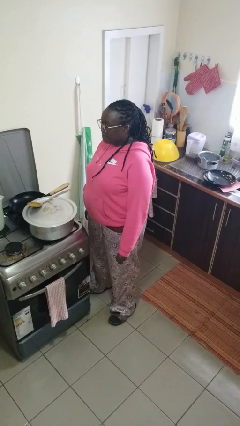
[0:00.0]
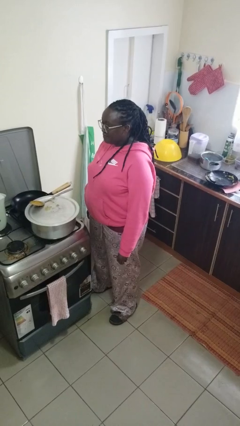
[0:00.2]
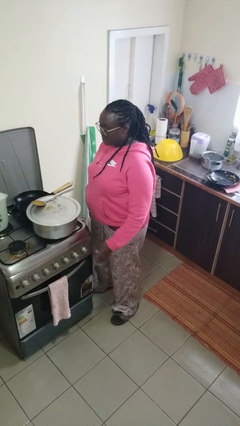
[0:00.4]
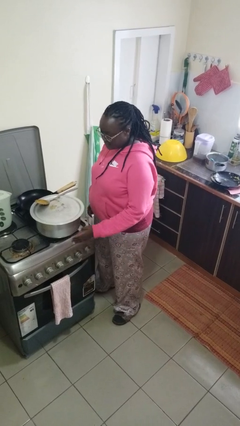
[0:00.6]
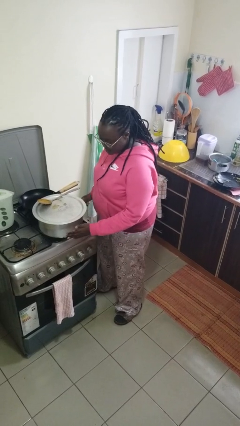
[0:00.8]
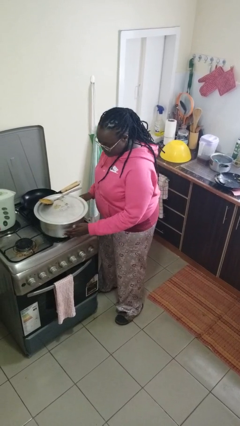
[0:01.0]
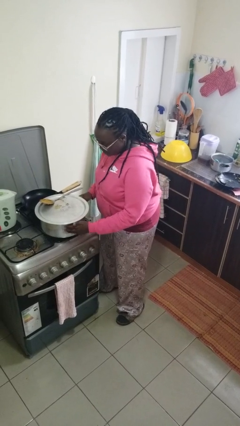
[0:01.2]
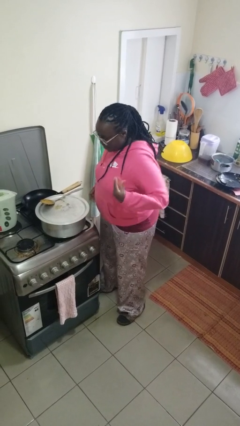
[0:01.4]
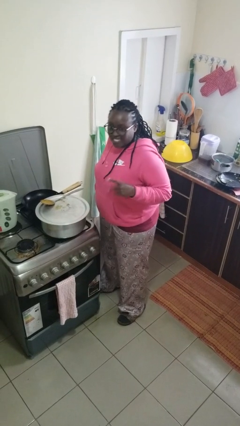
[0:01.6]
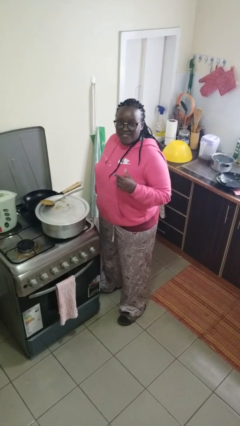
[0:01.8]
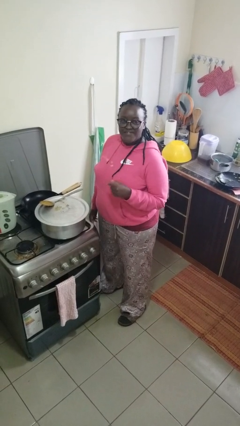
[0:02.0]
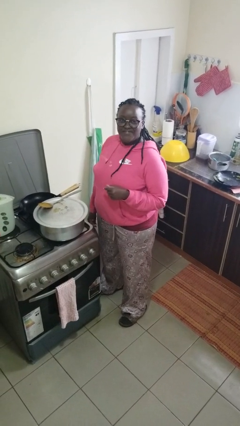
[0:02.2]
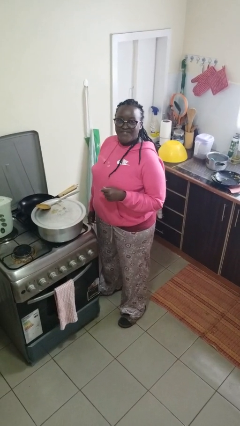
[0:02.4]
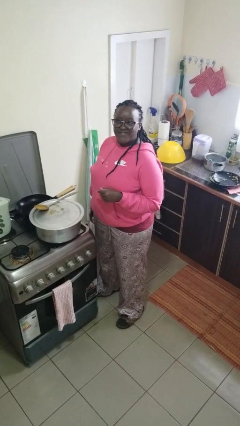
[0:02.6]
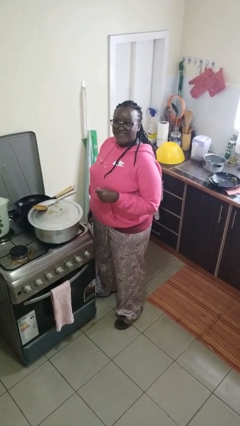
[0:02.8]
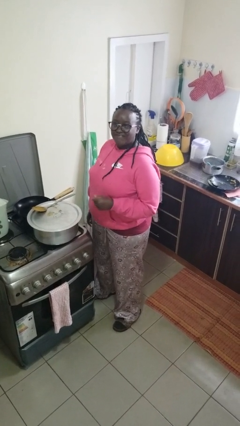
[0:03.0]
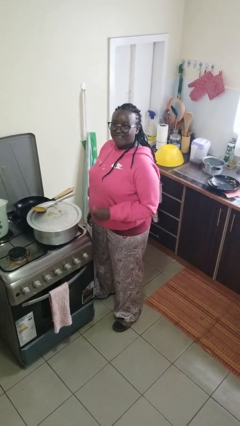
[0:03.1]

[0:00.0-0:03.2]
person burns hand

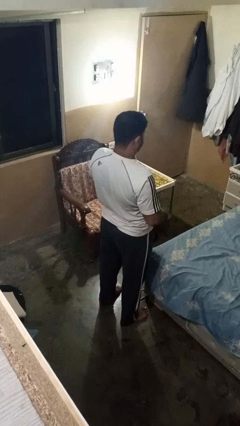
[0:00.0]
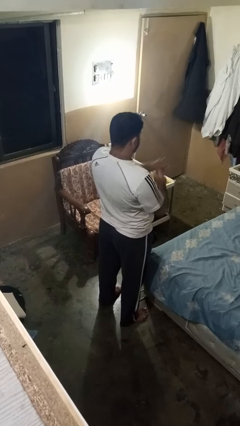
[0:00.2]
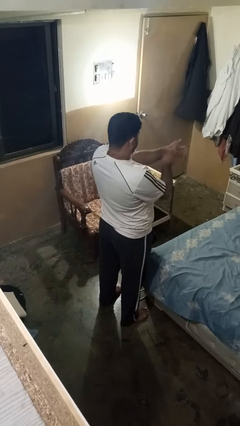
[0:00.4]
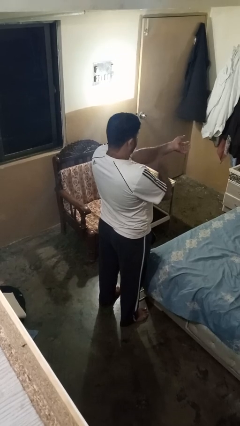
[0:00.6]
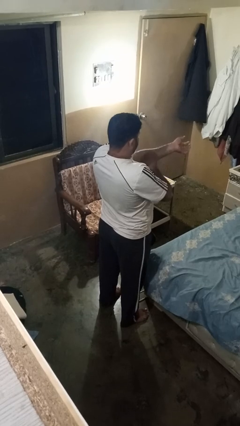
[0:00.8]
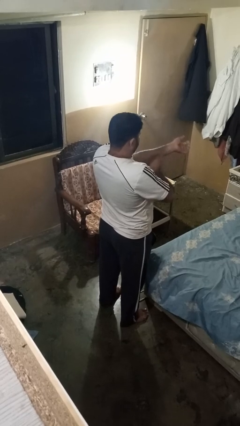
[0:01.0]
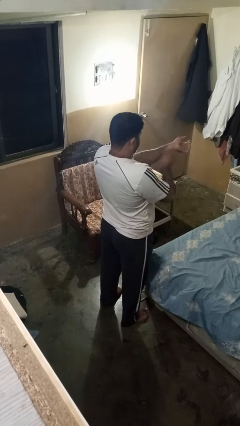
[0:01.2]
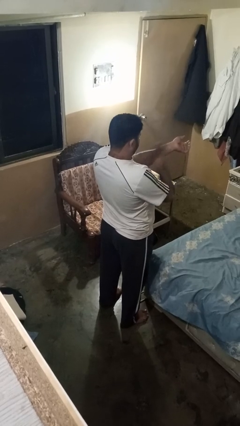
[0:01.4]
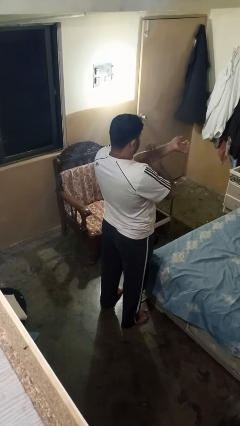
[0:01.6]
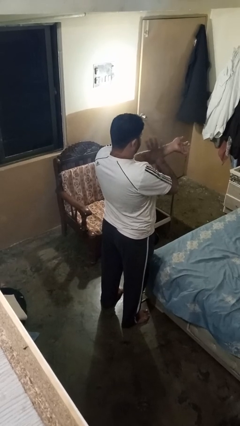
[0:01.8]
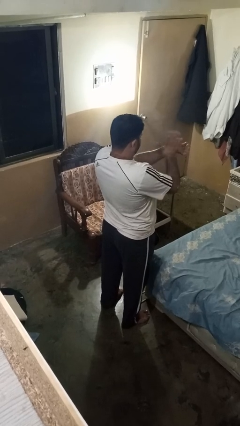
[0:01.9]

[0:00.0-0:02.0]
person swats bug

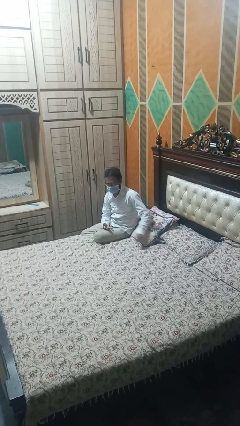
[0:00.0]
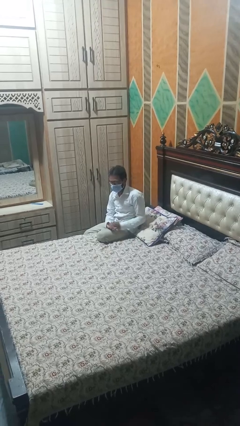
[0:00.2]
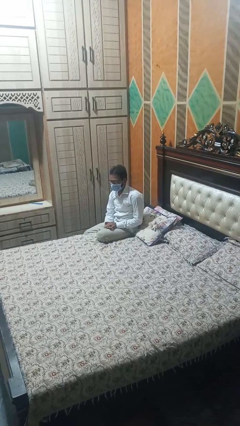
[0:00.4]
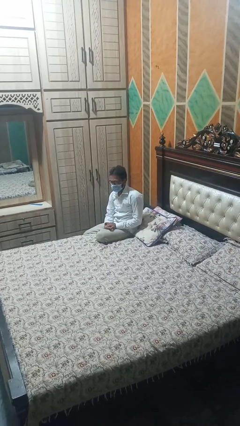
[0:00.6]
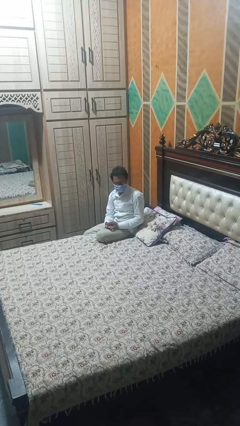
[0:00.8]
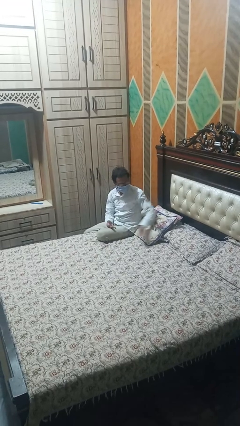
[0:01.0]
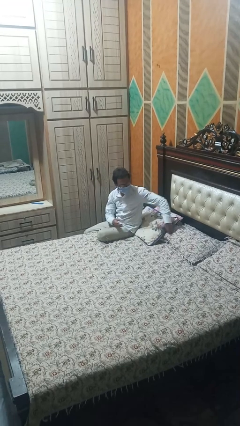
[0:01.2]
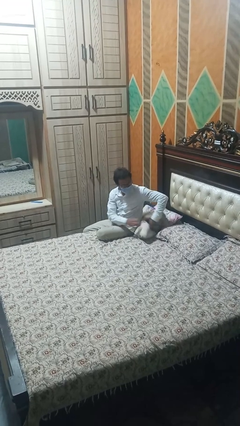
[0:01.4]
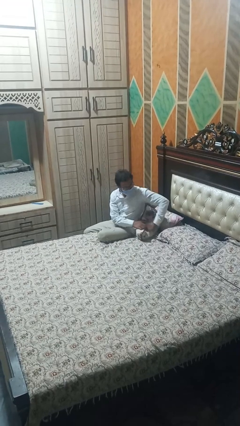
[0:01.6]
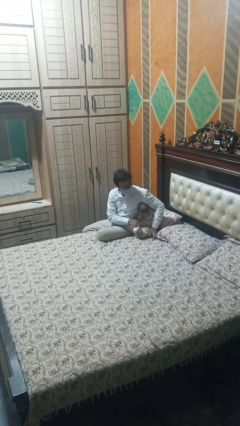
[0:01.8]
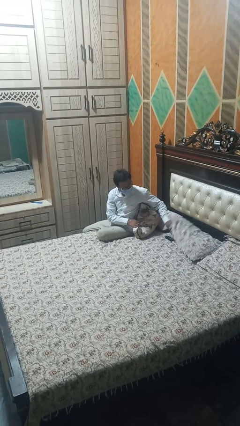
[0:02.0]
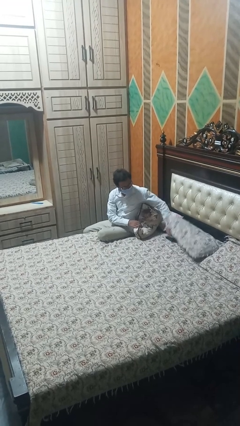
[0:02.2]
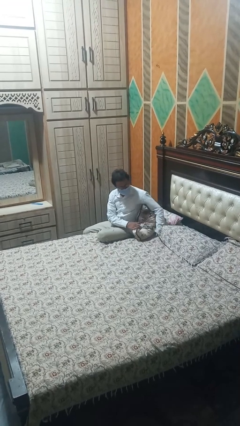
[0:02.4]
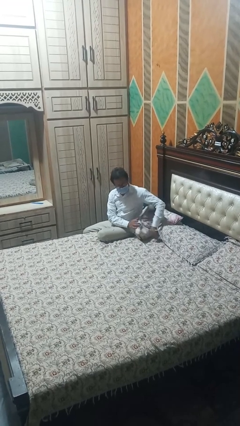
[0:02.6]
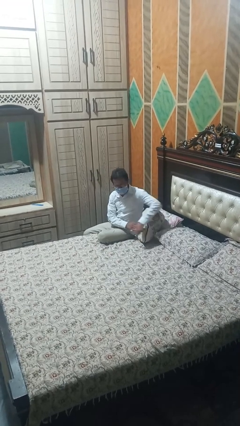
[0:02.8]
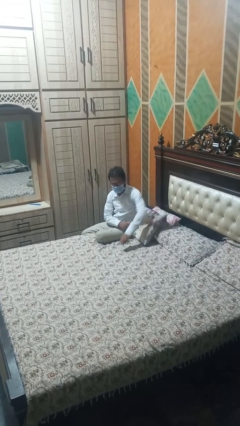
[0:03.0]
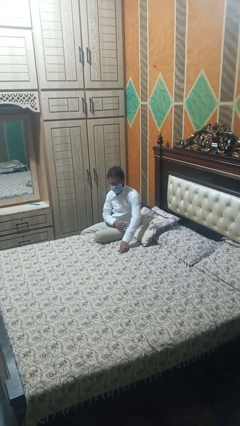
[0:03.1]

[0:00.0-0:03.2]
person searches under bed

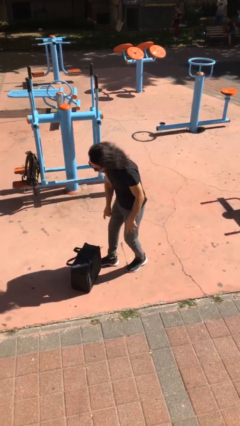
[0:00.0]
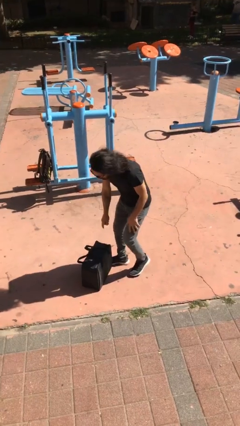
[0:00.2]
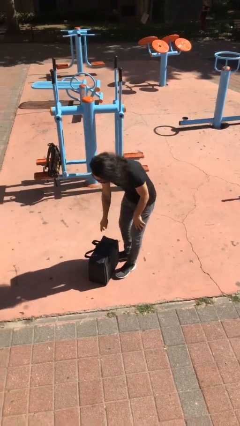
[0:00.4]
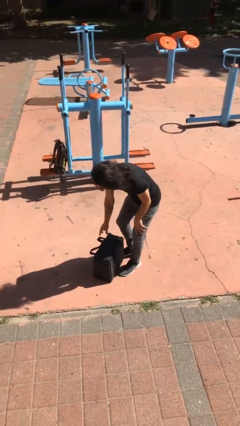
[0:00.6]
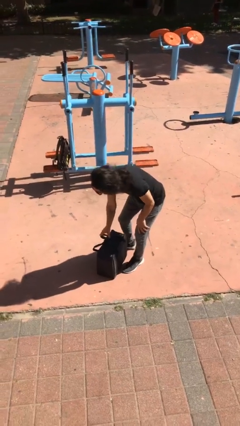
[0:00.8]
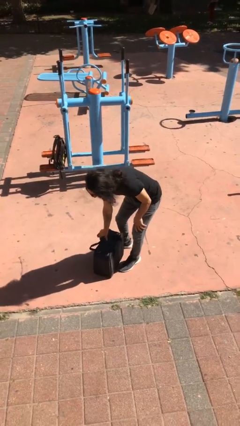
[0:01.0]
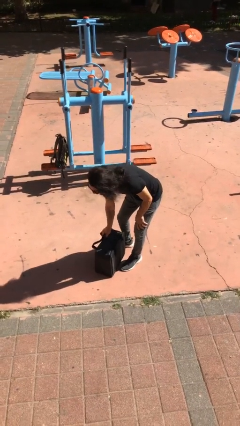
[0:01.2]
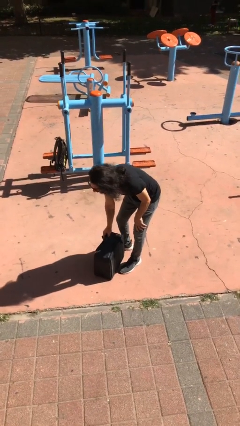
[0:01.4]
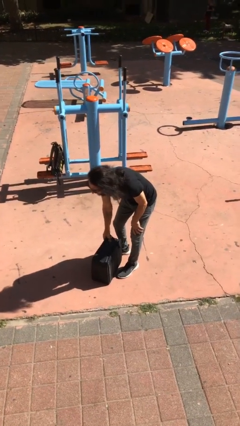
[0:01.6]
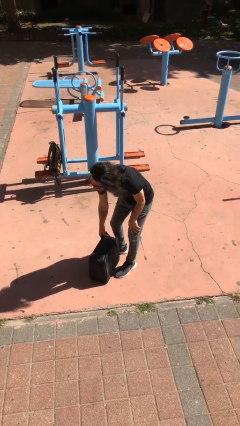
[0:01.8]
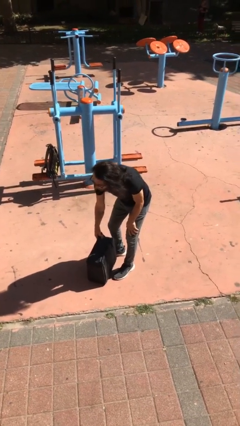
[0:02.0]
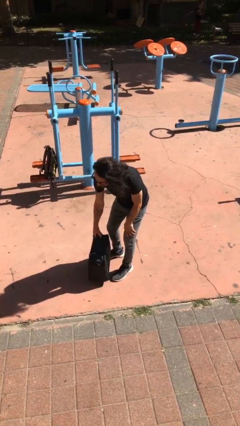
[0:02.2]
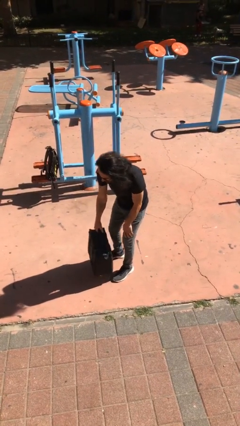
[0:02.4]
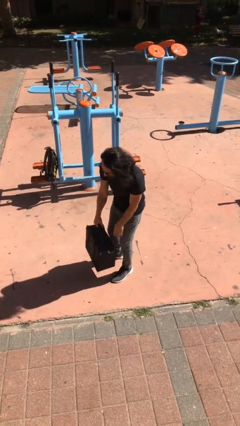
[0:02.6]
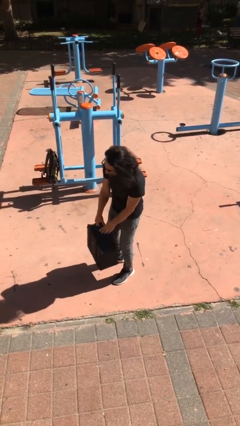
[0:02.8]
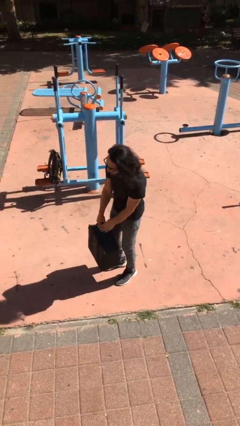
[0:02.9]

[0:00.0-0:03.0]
person picks up object from floor

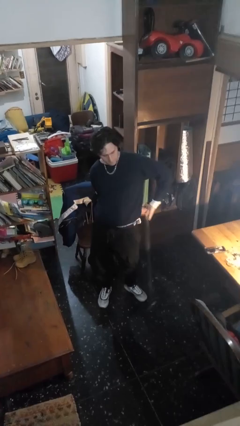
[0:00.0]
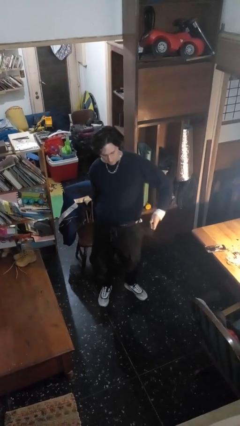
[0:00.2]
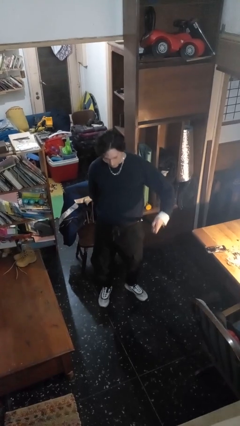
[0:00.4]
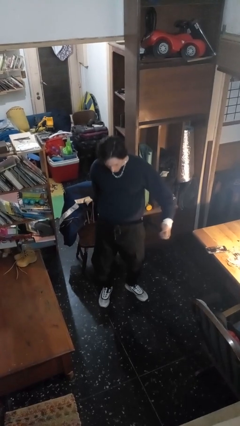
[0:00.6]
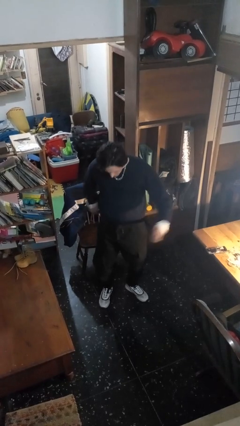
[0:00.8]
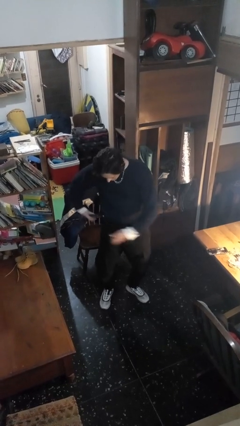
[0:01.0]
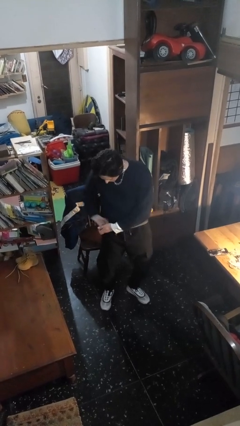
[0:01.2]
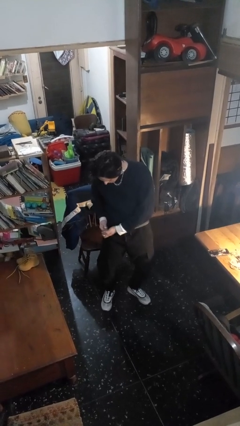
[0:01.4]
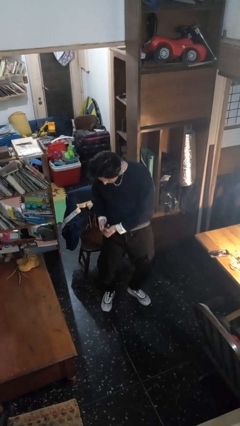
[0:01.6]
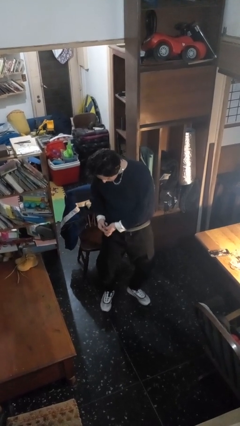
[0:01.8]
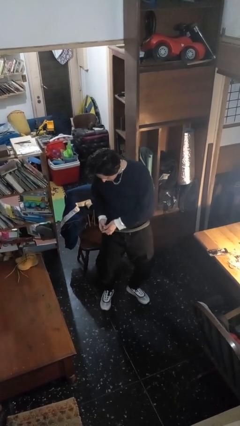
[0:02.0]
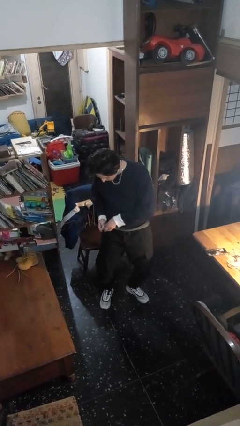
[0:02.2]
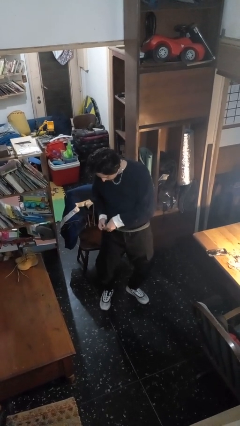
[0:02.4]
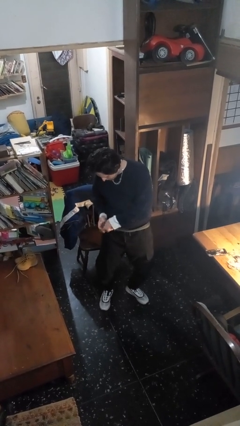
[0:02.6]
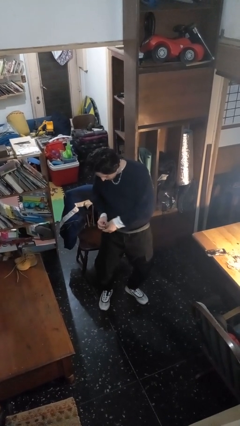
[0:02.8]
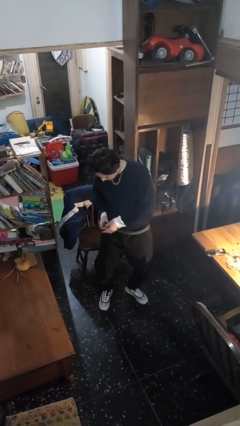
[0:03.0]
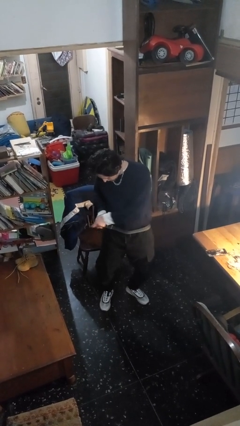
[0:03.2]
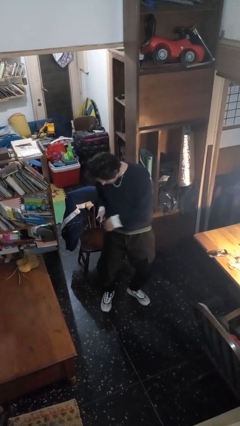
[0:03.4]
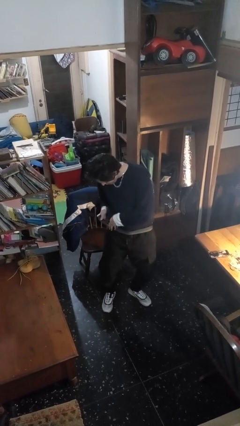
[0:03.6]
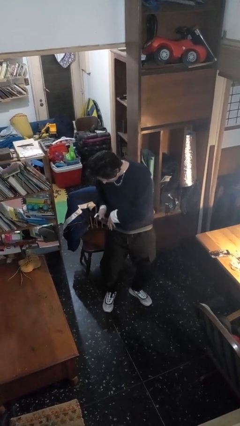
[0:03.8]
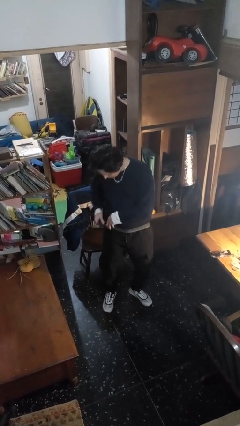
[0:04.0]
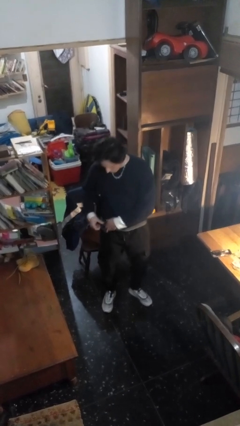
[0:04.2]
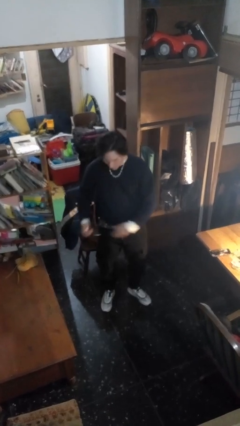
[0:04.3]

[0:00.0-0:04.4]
person puts on belt

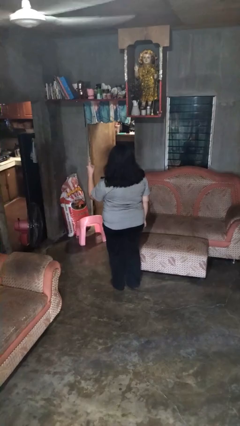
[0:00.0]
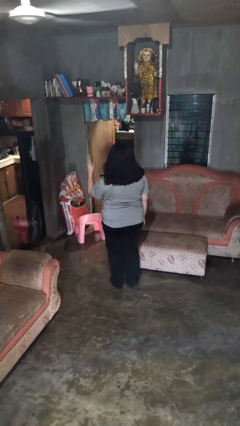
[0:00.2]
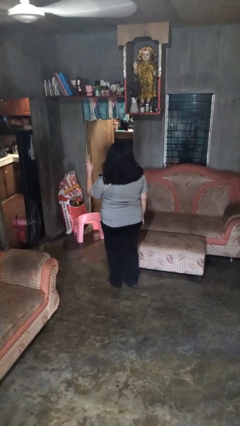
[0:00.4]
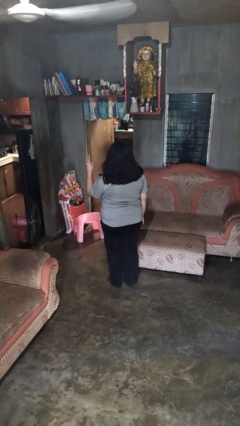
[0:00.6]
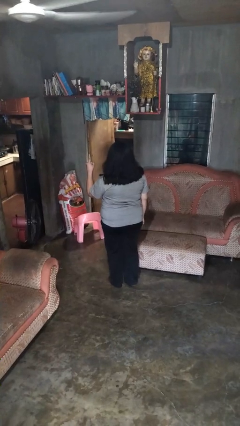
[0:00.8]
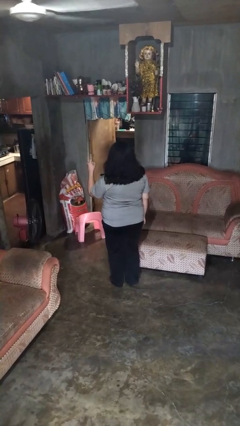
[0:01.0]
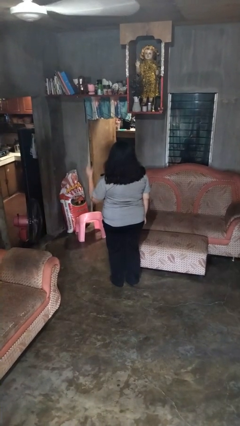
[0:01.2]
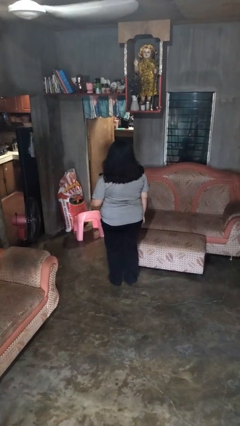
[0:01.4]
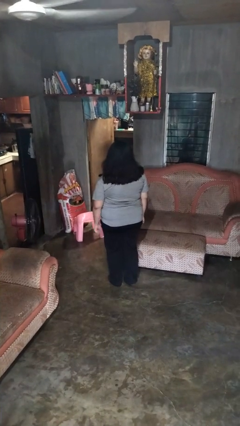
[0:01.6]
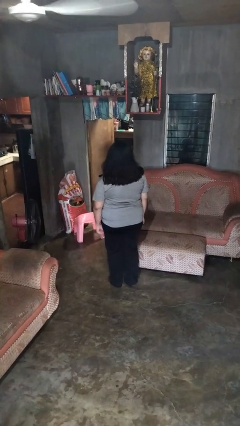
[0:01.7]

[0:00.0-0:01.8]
person gestures number one
